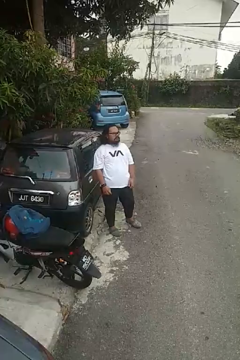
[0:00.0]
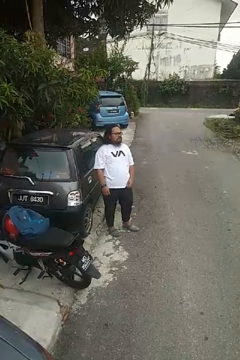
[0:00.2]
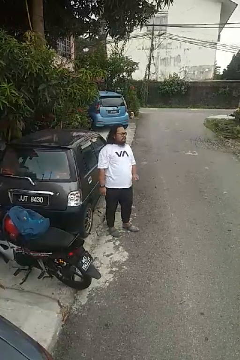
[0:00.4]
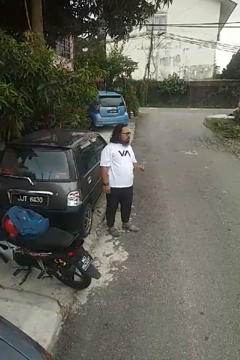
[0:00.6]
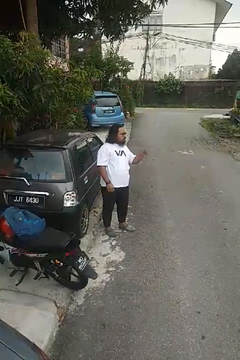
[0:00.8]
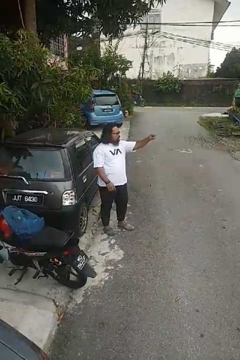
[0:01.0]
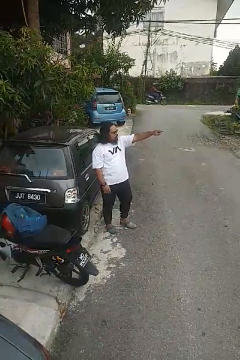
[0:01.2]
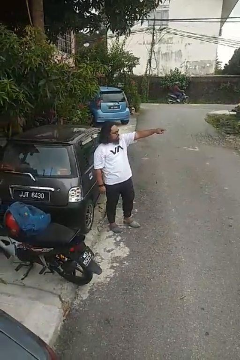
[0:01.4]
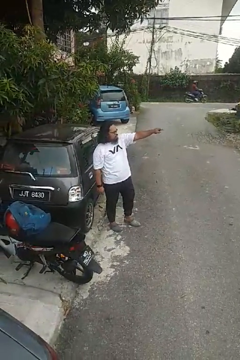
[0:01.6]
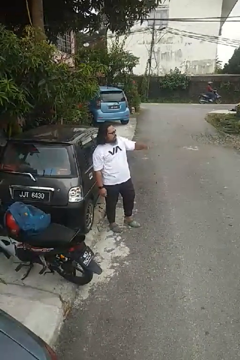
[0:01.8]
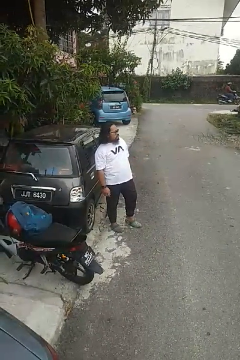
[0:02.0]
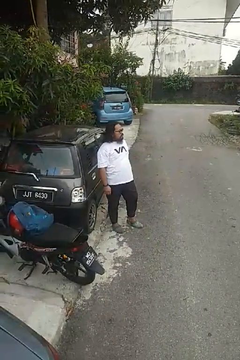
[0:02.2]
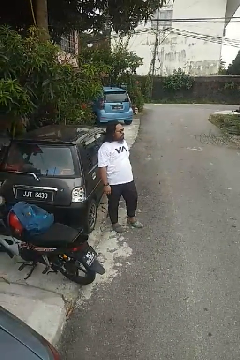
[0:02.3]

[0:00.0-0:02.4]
person points at person

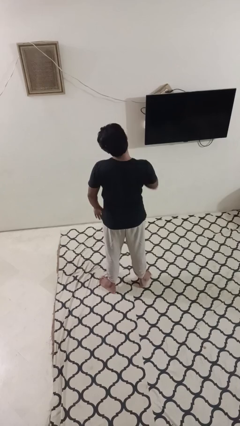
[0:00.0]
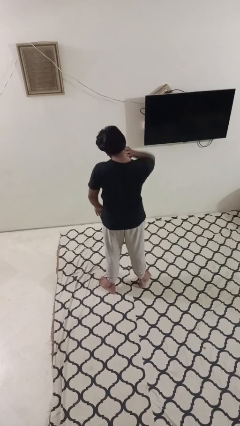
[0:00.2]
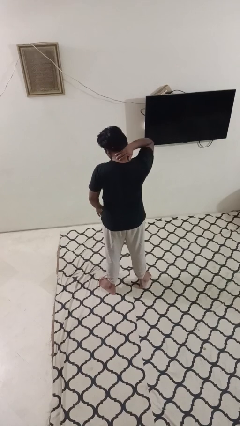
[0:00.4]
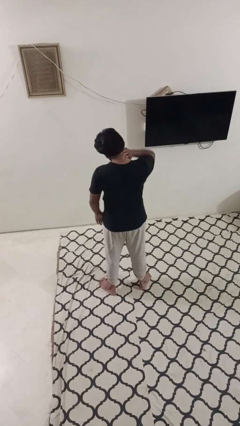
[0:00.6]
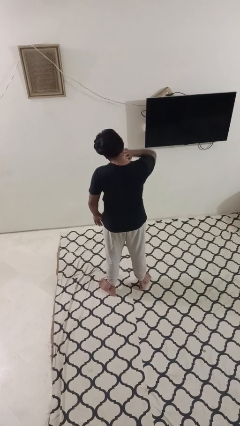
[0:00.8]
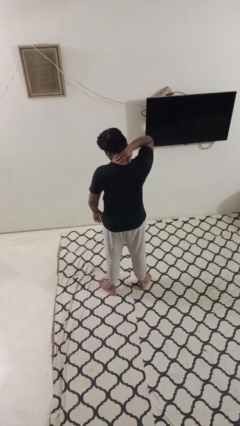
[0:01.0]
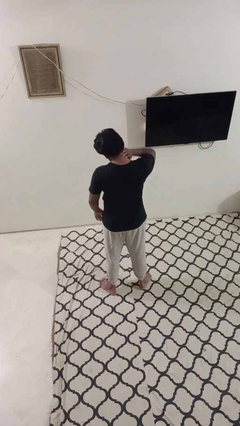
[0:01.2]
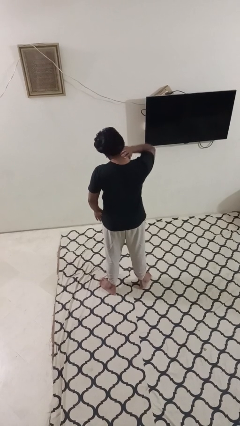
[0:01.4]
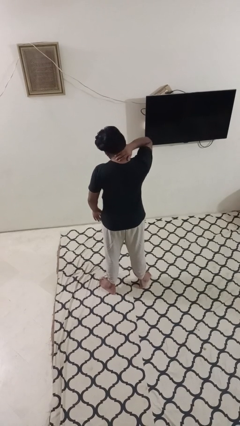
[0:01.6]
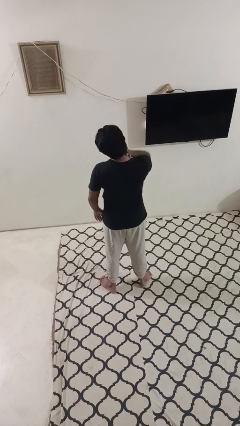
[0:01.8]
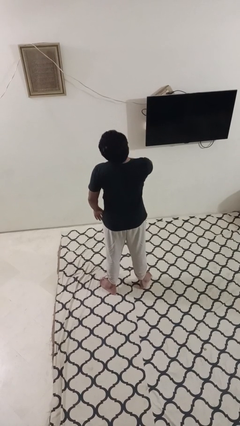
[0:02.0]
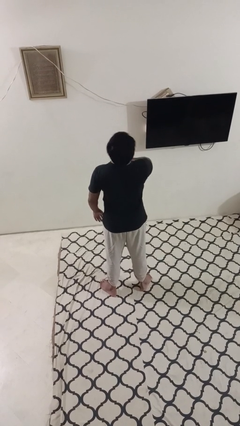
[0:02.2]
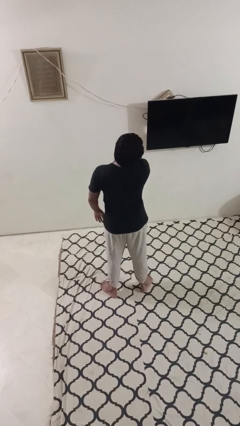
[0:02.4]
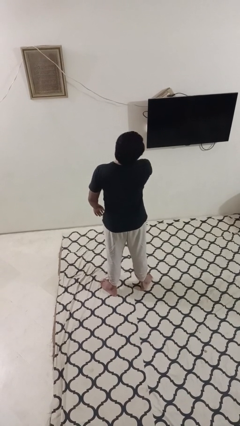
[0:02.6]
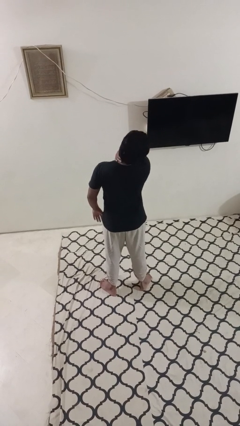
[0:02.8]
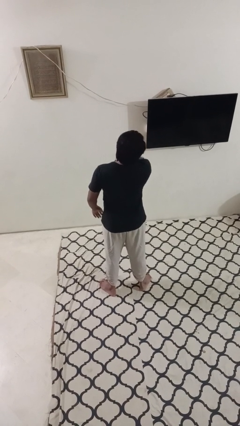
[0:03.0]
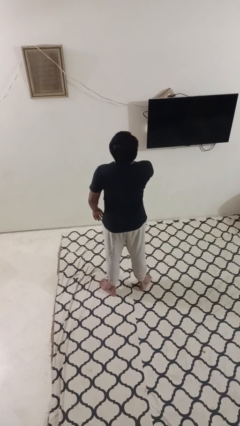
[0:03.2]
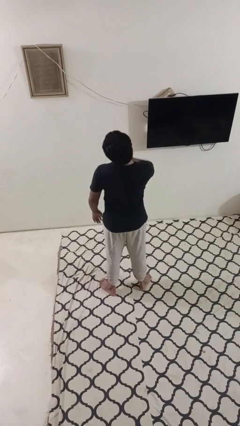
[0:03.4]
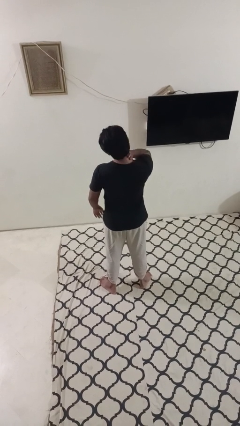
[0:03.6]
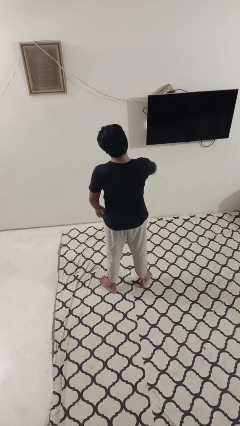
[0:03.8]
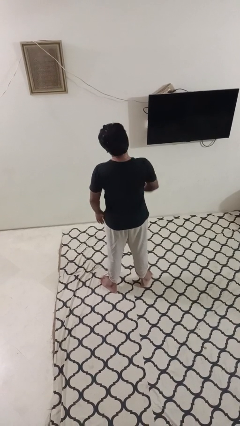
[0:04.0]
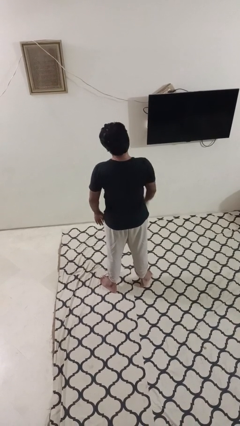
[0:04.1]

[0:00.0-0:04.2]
person rubs neck

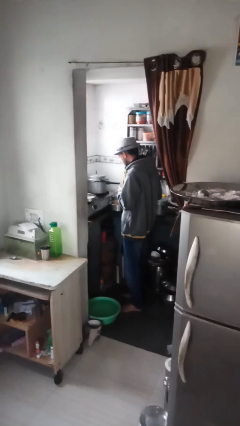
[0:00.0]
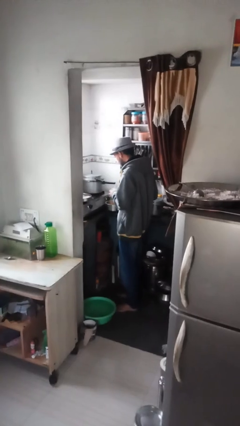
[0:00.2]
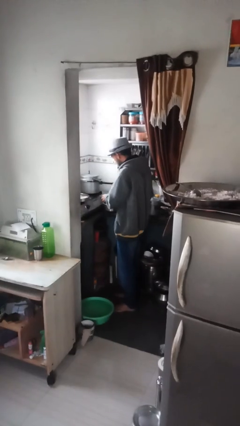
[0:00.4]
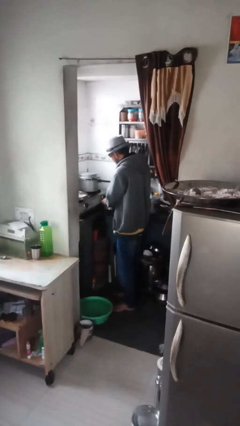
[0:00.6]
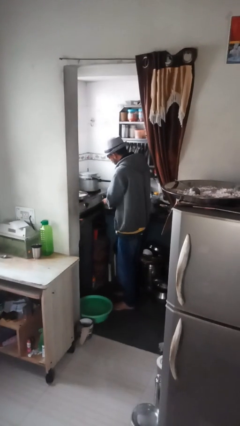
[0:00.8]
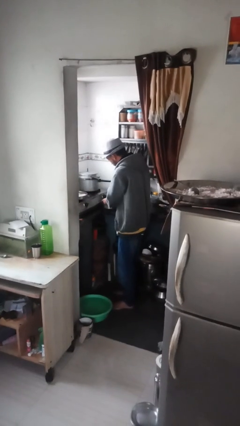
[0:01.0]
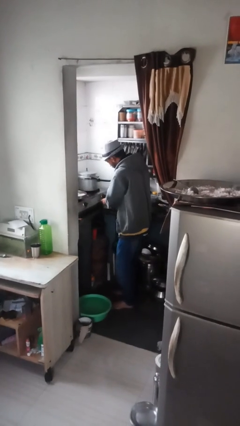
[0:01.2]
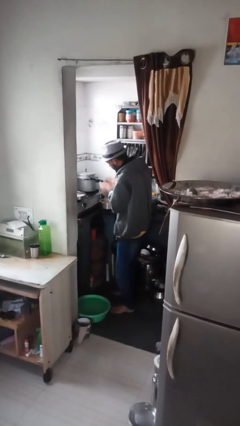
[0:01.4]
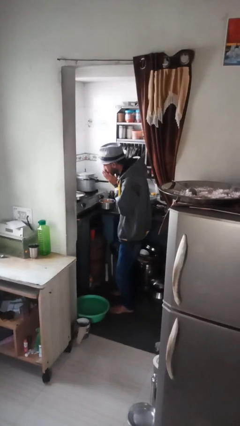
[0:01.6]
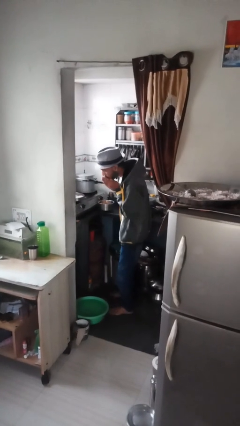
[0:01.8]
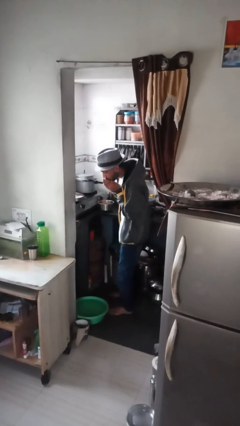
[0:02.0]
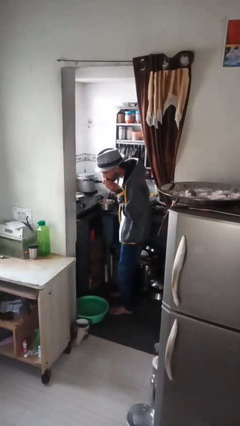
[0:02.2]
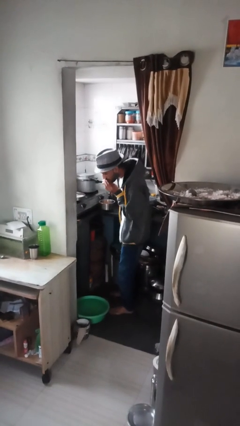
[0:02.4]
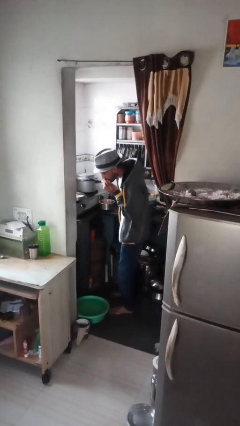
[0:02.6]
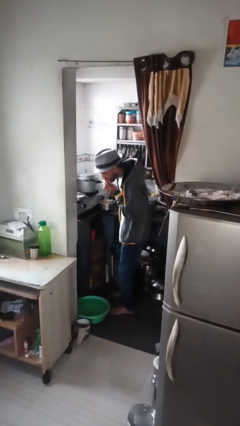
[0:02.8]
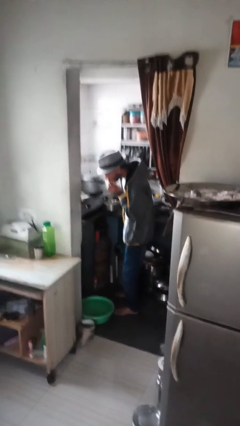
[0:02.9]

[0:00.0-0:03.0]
person burns hand

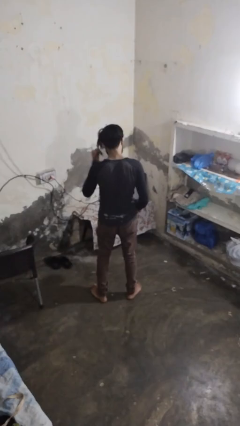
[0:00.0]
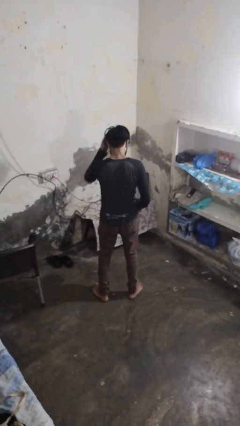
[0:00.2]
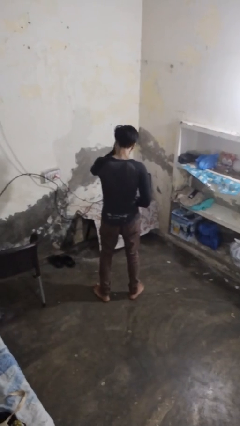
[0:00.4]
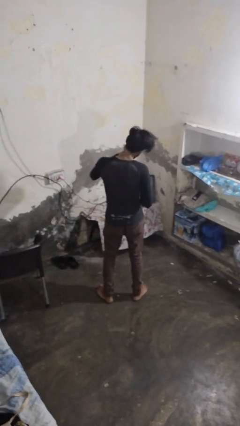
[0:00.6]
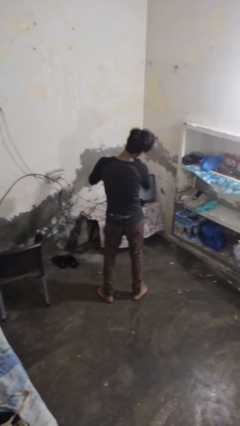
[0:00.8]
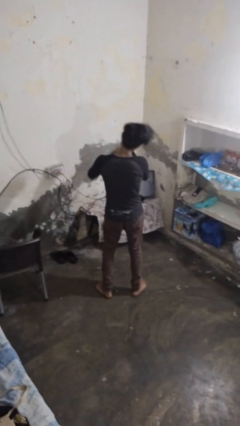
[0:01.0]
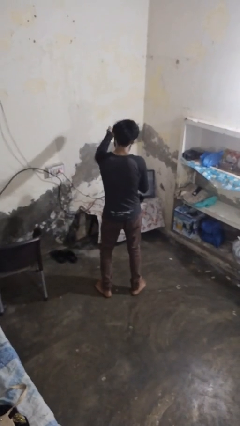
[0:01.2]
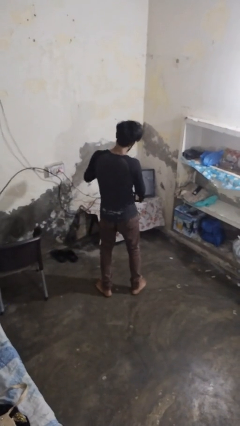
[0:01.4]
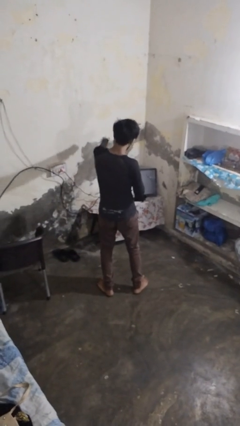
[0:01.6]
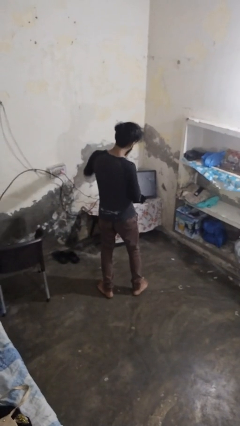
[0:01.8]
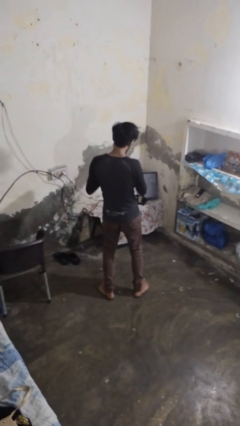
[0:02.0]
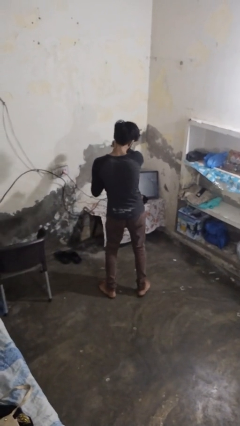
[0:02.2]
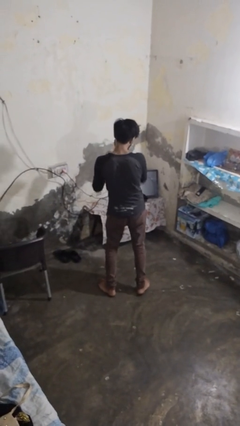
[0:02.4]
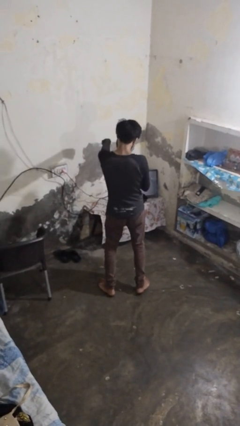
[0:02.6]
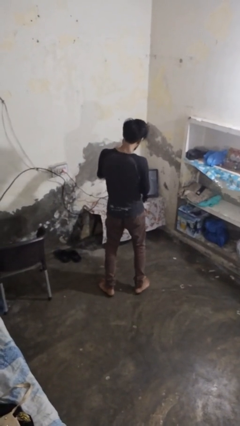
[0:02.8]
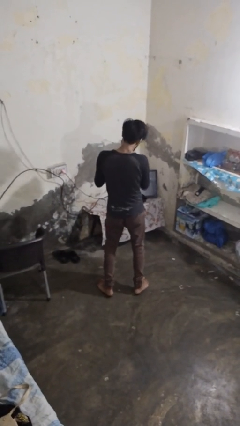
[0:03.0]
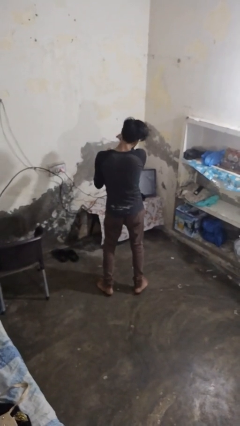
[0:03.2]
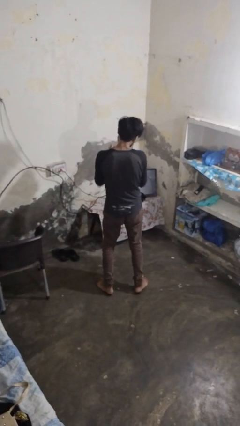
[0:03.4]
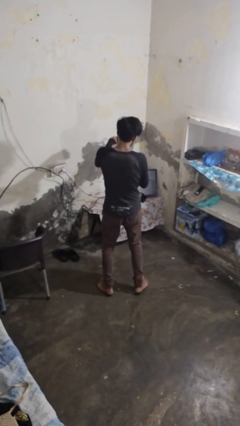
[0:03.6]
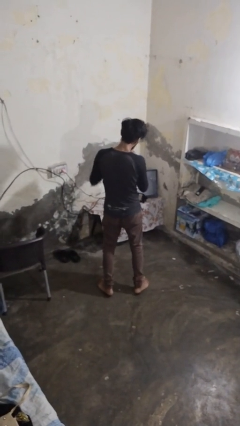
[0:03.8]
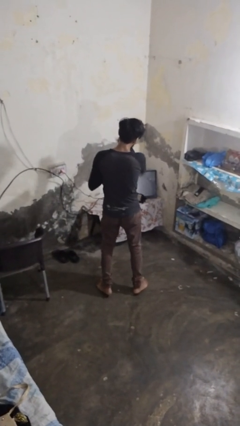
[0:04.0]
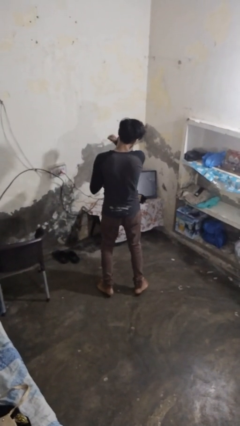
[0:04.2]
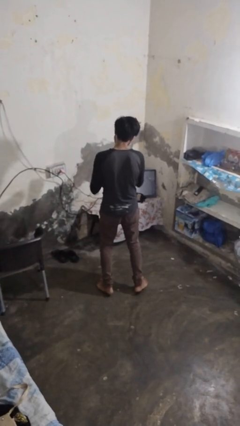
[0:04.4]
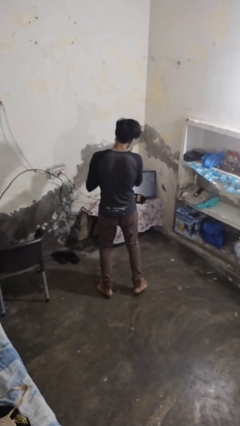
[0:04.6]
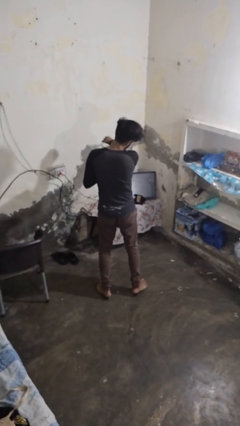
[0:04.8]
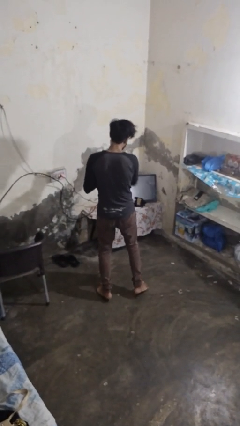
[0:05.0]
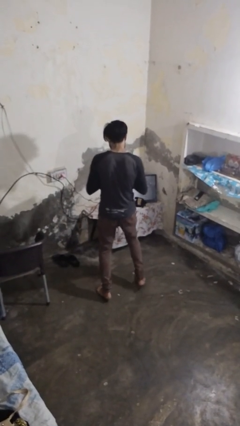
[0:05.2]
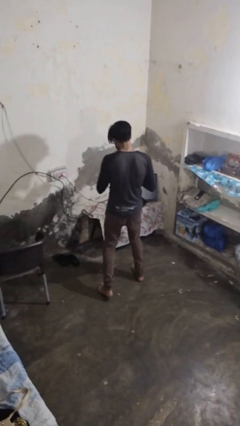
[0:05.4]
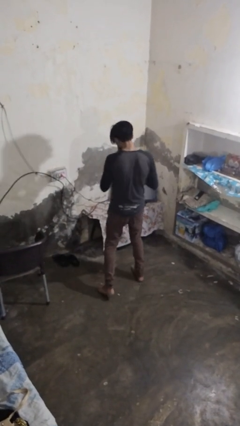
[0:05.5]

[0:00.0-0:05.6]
person punches

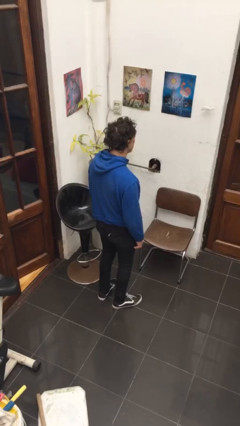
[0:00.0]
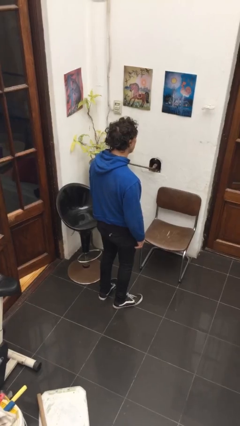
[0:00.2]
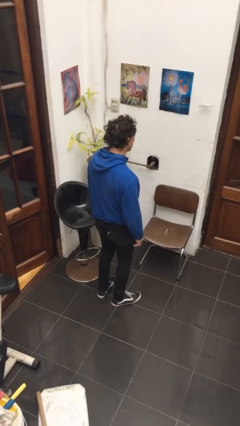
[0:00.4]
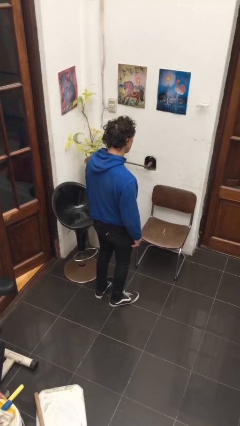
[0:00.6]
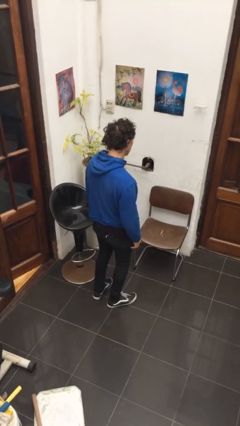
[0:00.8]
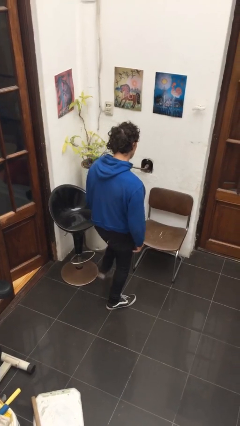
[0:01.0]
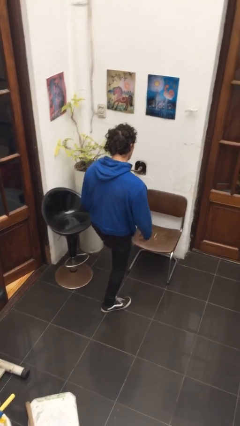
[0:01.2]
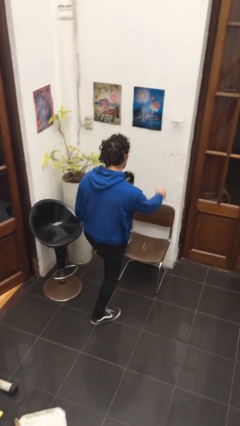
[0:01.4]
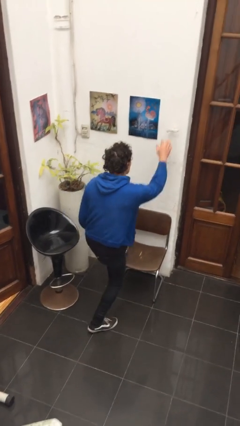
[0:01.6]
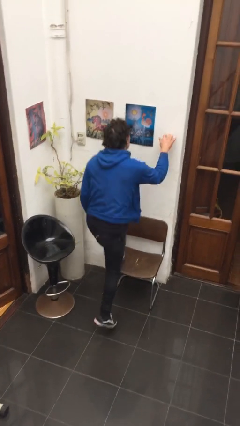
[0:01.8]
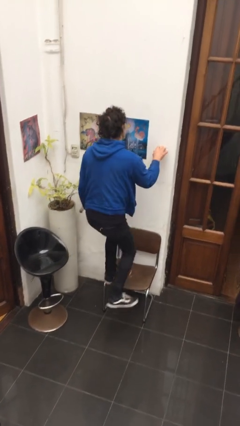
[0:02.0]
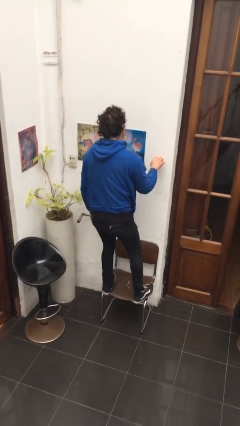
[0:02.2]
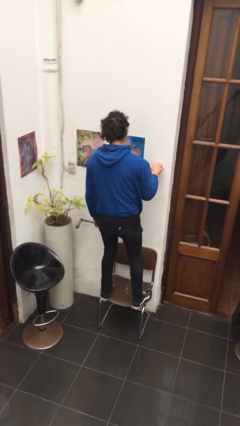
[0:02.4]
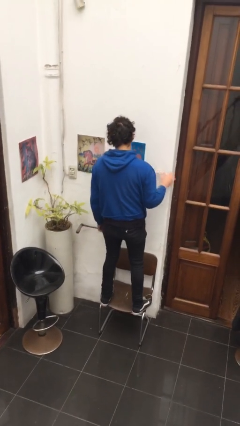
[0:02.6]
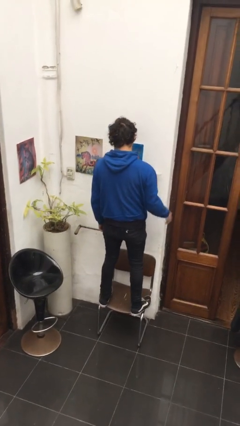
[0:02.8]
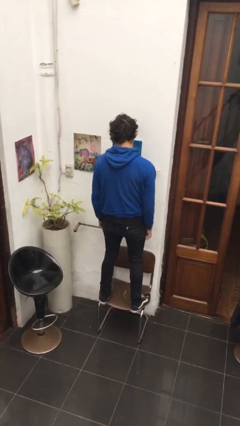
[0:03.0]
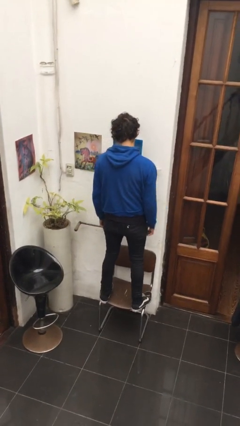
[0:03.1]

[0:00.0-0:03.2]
person climbs on chair
